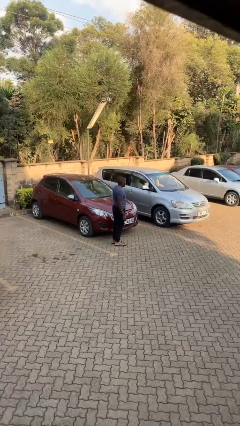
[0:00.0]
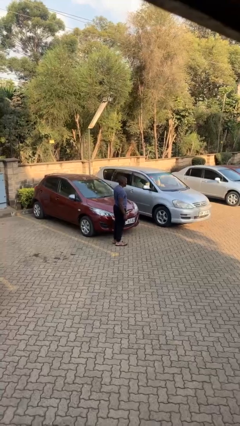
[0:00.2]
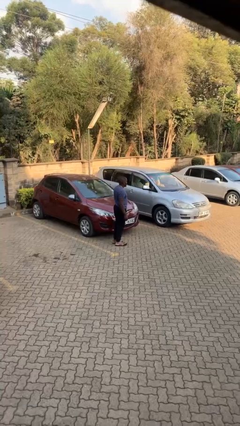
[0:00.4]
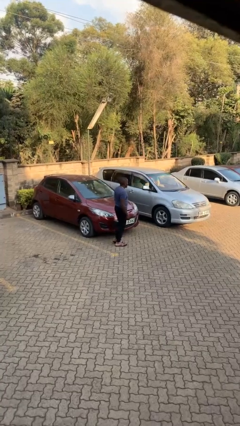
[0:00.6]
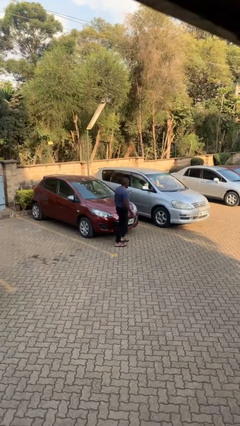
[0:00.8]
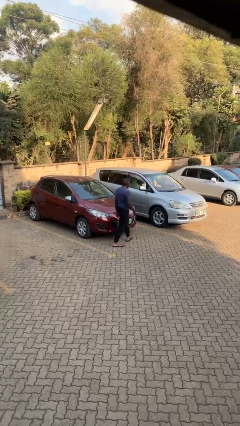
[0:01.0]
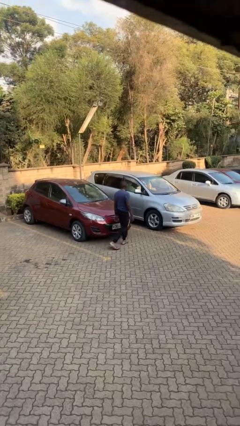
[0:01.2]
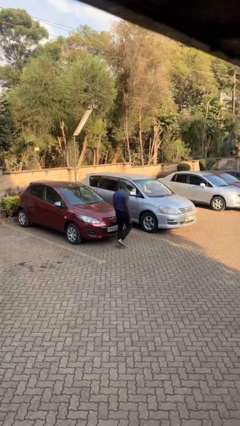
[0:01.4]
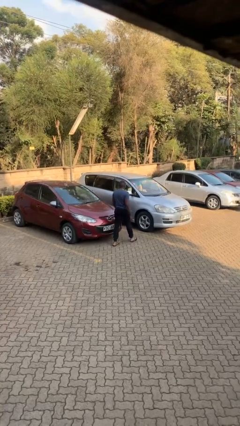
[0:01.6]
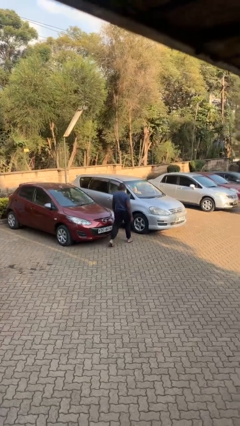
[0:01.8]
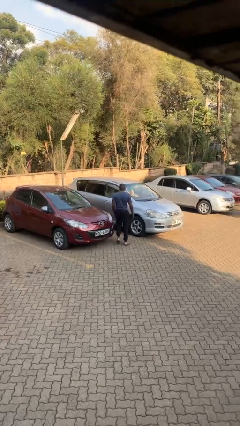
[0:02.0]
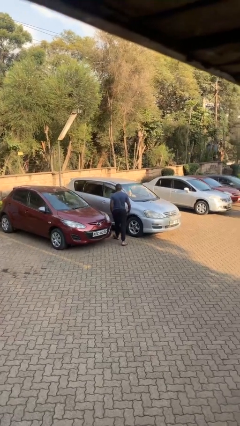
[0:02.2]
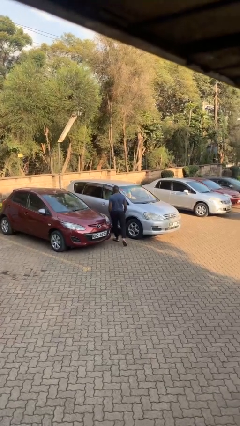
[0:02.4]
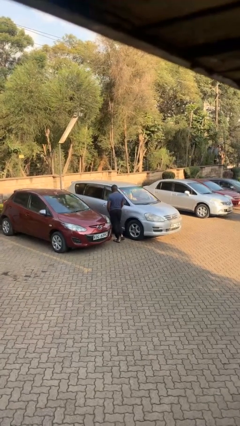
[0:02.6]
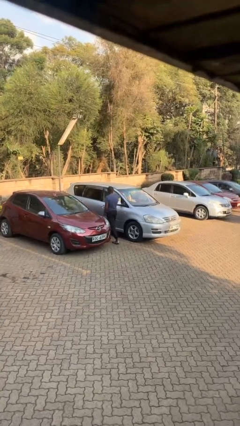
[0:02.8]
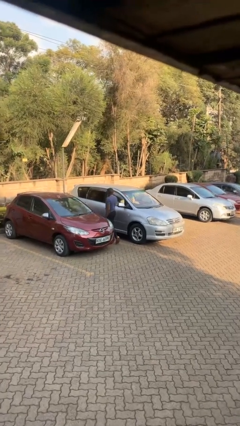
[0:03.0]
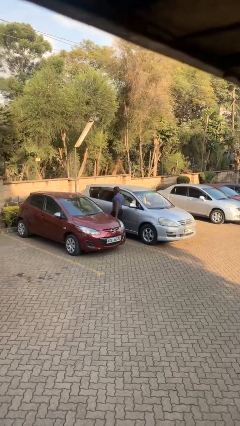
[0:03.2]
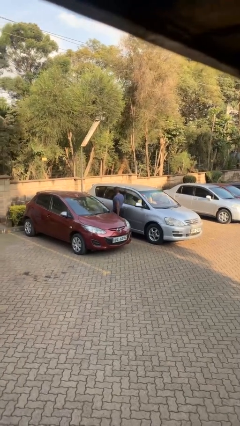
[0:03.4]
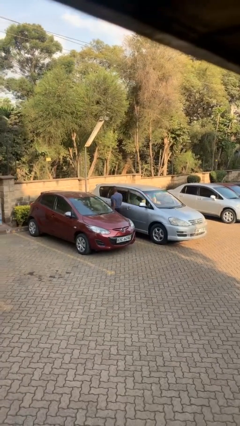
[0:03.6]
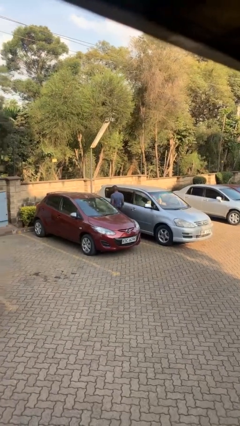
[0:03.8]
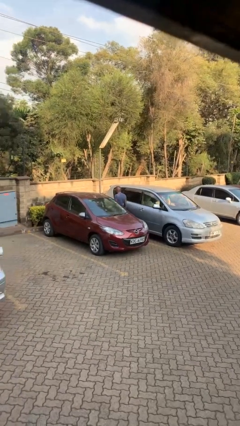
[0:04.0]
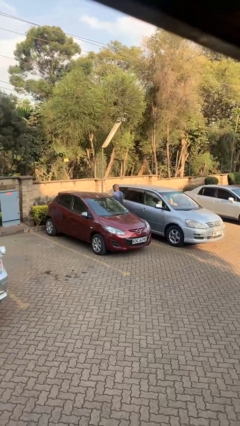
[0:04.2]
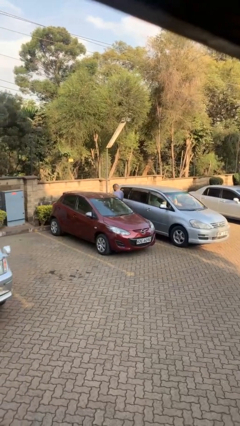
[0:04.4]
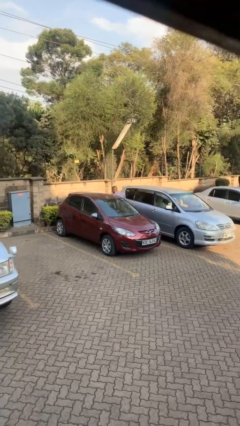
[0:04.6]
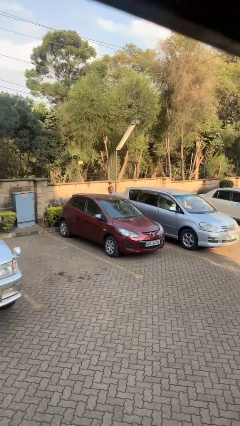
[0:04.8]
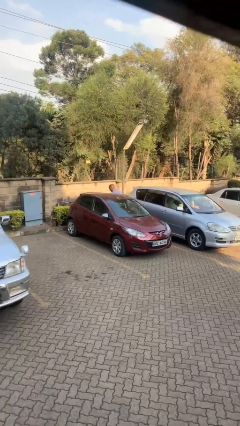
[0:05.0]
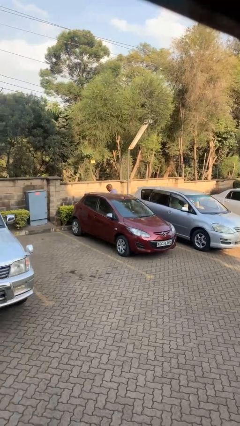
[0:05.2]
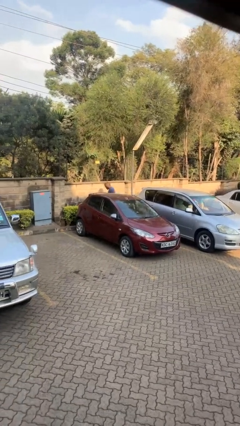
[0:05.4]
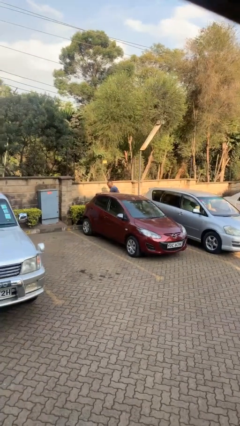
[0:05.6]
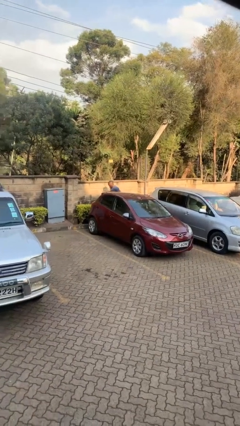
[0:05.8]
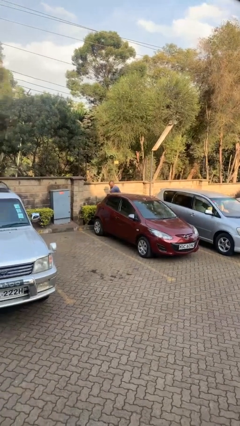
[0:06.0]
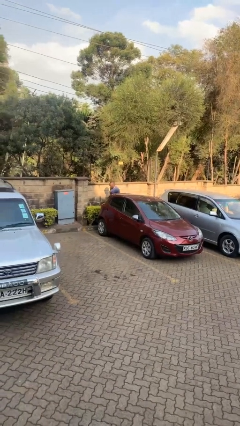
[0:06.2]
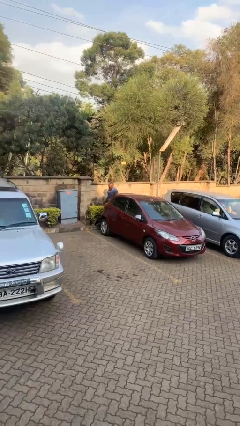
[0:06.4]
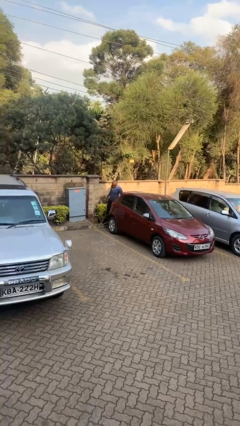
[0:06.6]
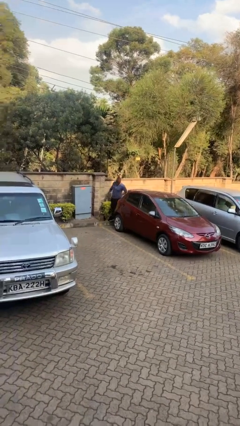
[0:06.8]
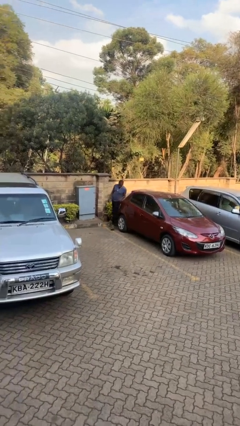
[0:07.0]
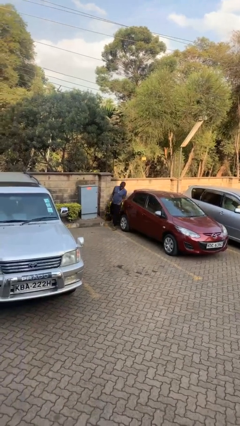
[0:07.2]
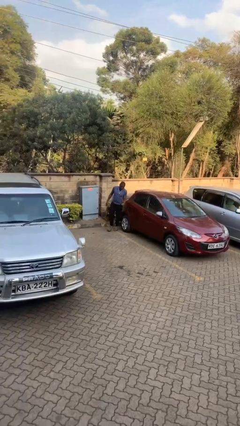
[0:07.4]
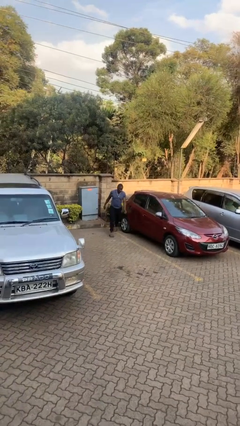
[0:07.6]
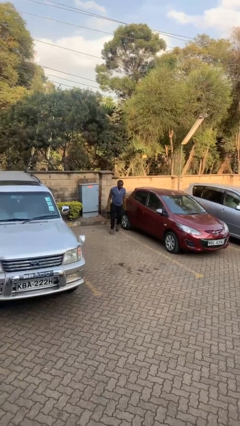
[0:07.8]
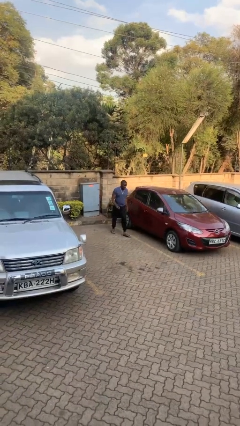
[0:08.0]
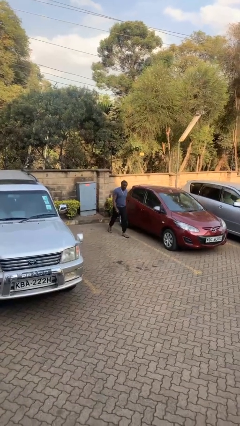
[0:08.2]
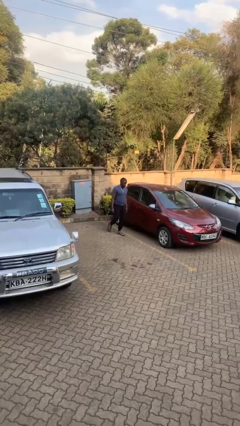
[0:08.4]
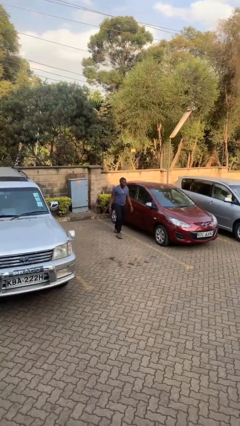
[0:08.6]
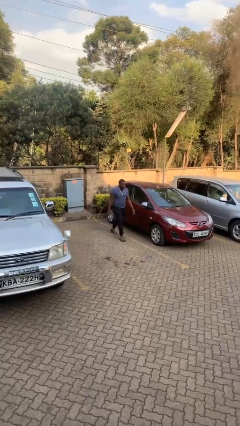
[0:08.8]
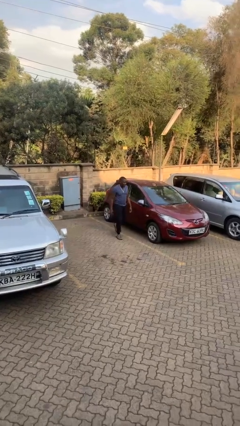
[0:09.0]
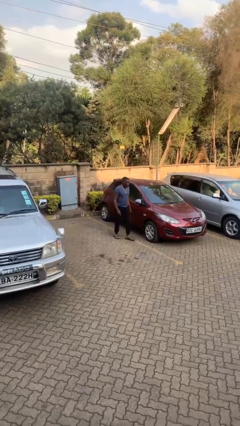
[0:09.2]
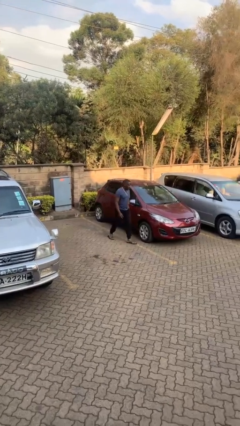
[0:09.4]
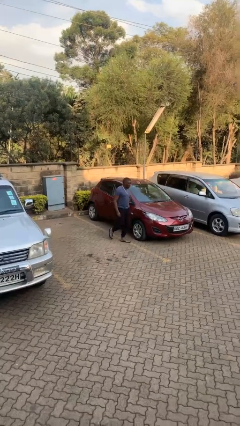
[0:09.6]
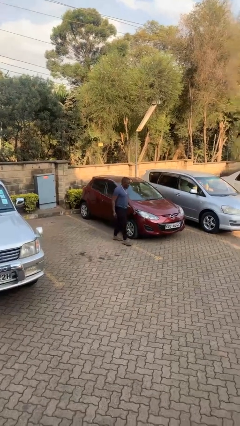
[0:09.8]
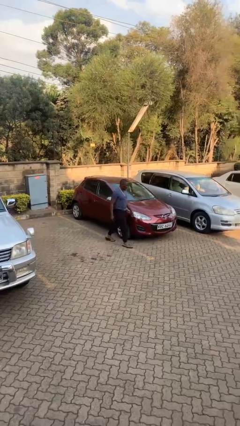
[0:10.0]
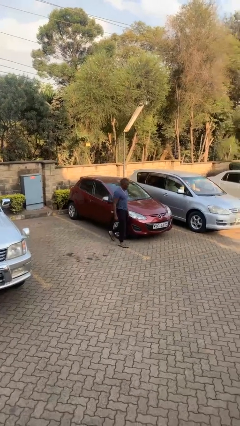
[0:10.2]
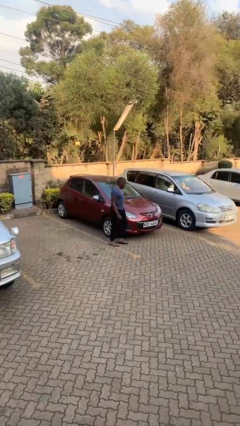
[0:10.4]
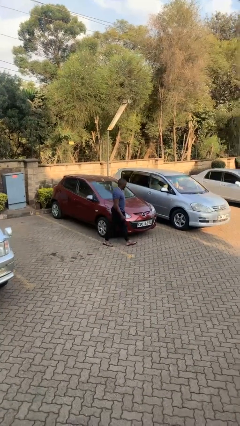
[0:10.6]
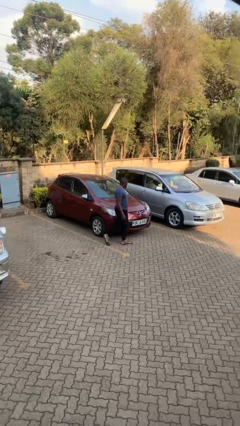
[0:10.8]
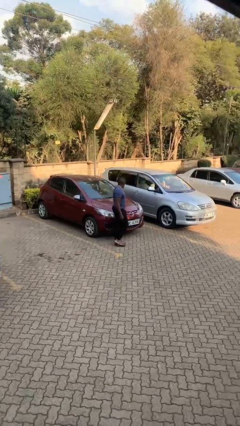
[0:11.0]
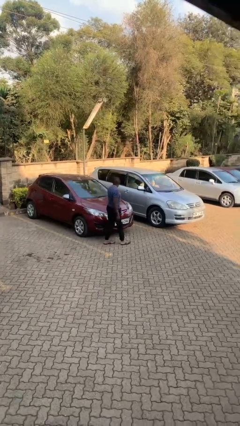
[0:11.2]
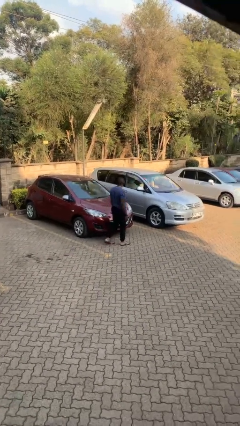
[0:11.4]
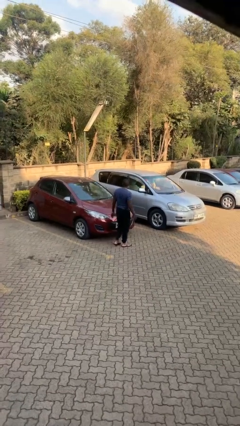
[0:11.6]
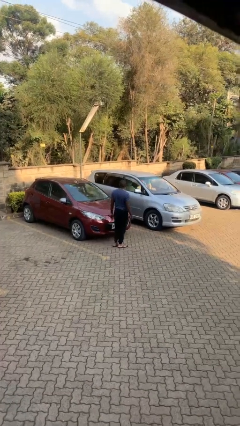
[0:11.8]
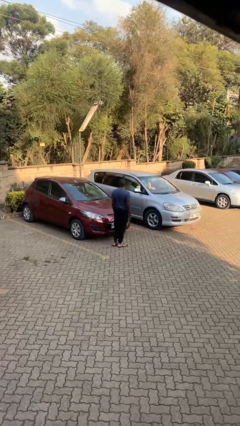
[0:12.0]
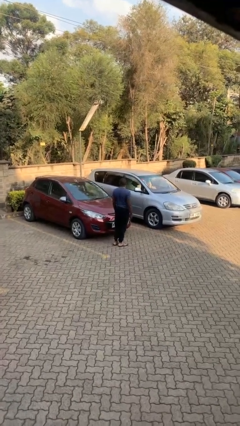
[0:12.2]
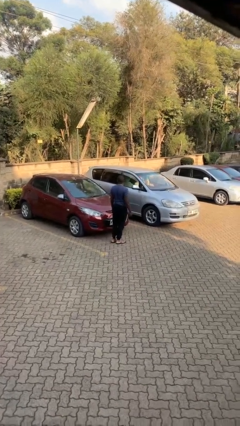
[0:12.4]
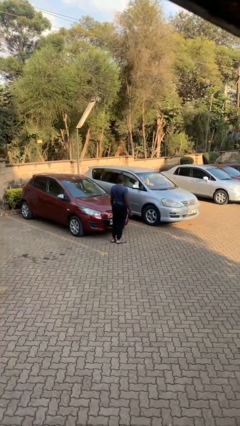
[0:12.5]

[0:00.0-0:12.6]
person walks around car

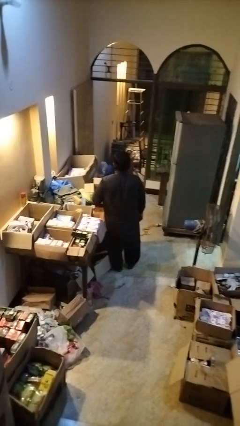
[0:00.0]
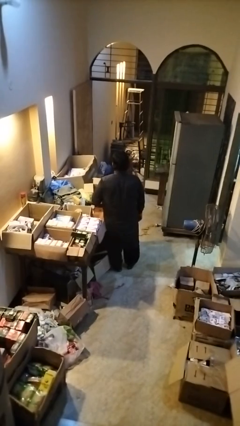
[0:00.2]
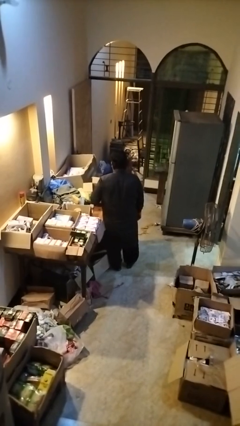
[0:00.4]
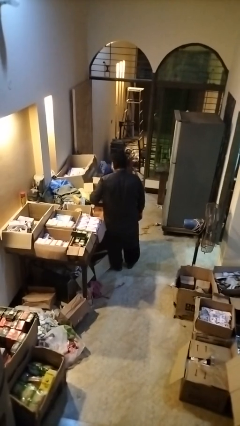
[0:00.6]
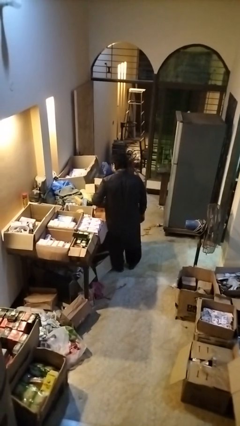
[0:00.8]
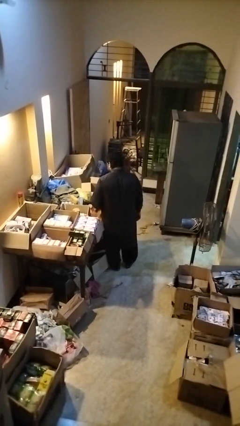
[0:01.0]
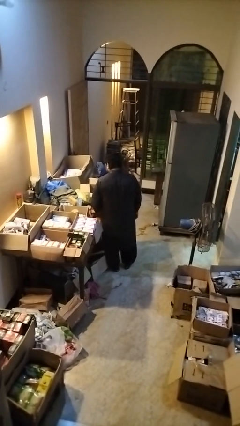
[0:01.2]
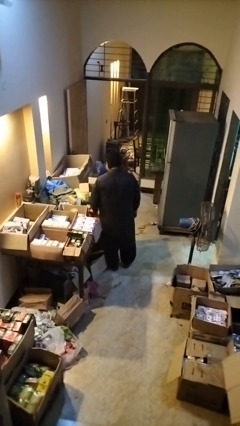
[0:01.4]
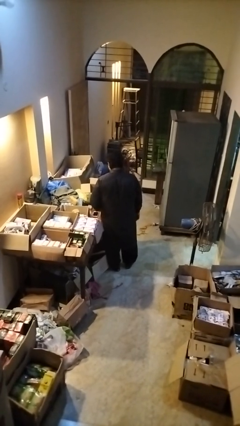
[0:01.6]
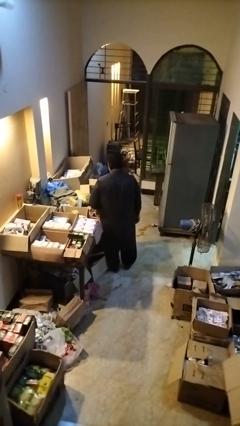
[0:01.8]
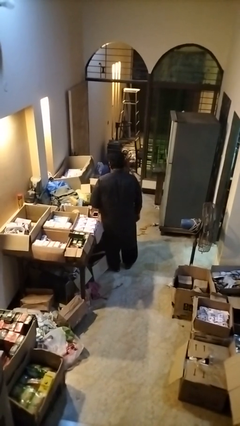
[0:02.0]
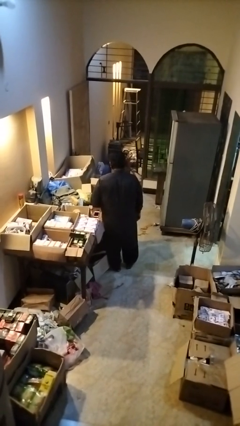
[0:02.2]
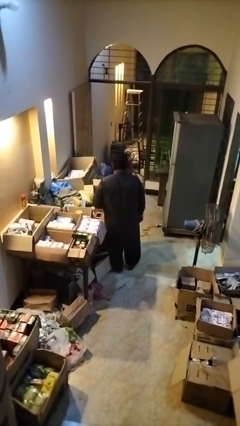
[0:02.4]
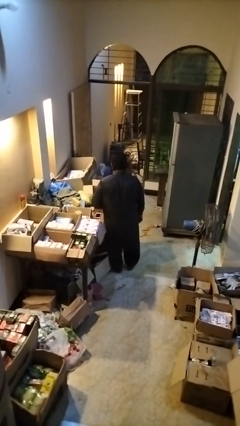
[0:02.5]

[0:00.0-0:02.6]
person puts object into box

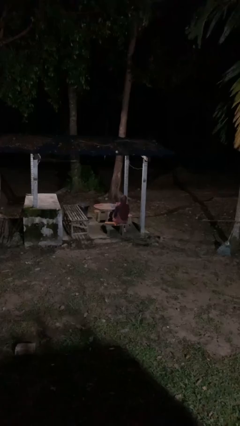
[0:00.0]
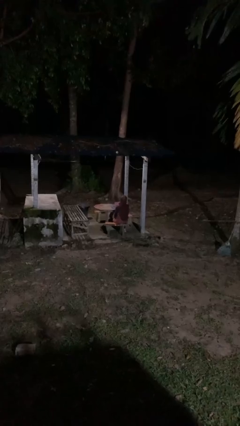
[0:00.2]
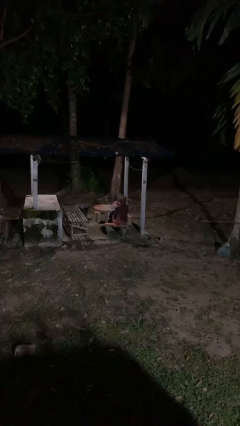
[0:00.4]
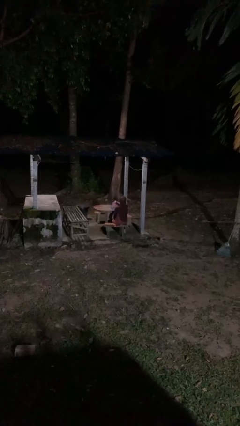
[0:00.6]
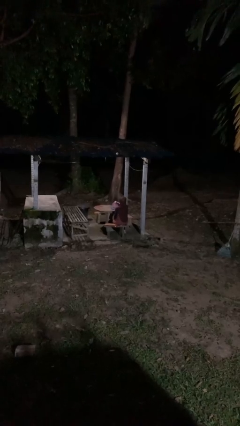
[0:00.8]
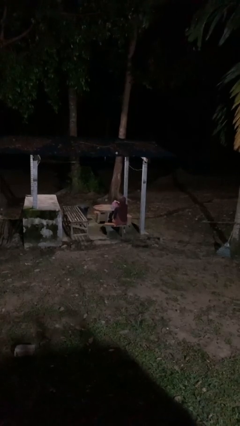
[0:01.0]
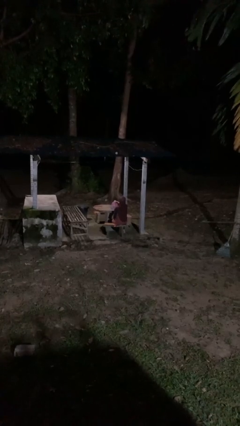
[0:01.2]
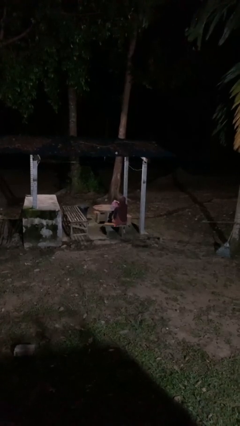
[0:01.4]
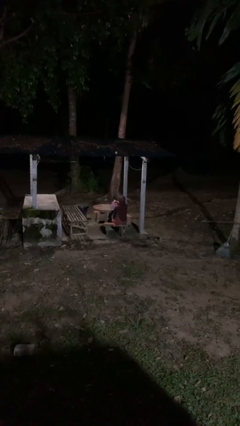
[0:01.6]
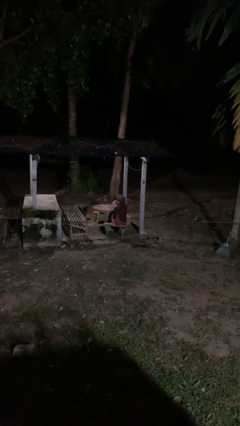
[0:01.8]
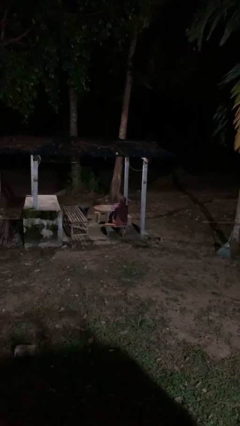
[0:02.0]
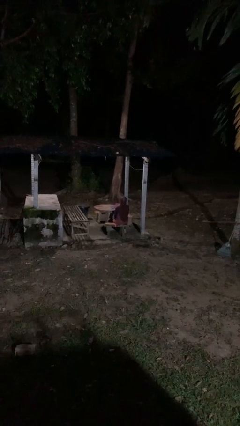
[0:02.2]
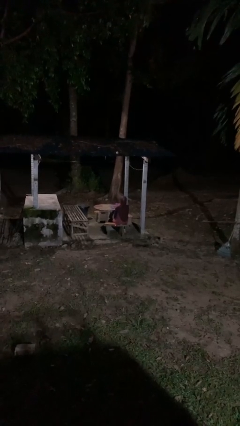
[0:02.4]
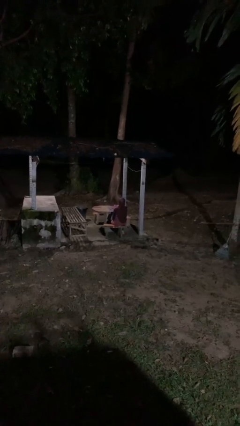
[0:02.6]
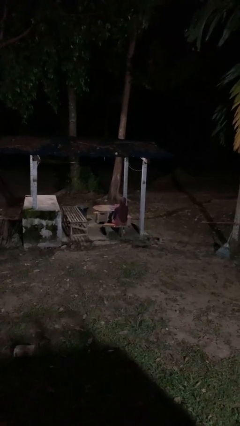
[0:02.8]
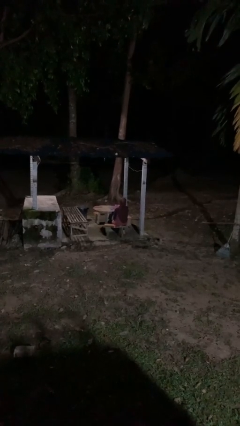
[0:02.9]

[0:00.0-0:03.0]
person pours coffee into mug
